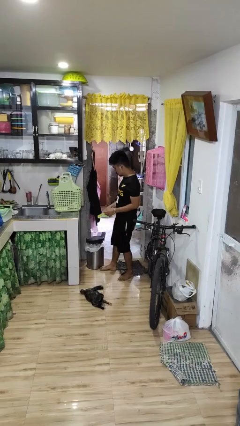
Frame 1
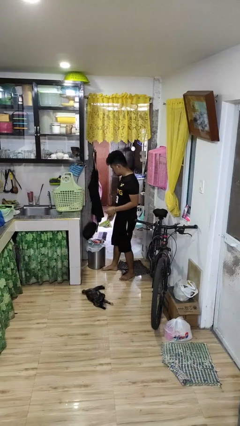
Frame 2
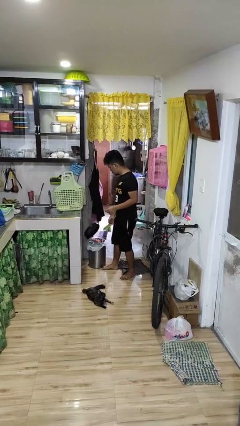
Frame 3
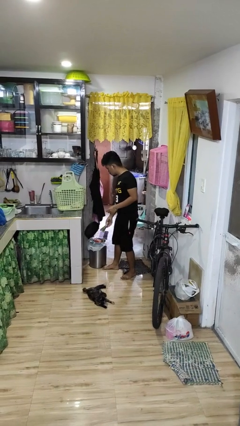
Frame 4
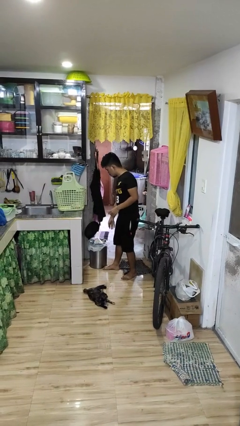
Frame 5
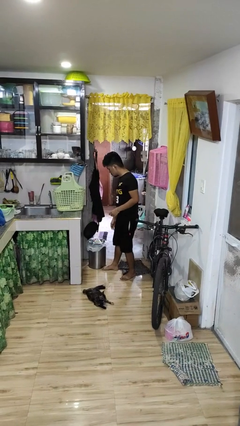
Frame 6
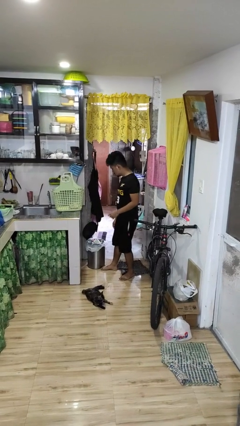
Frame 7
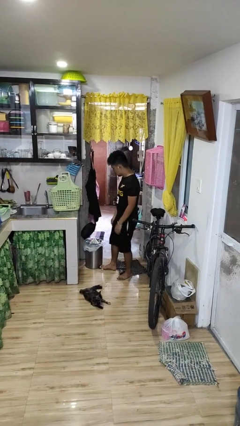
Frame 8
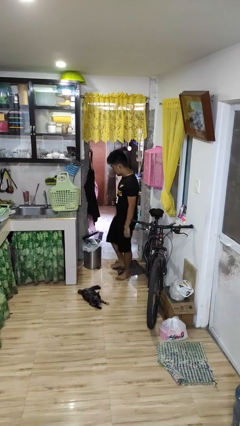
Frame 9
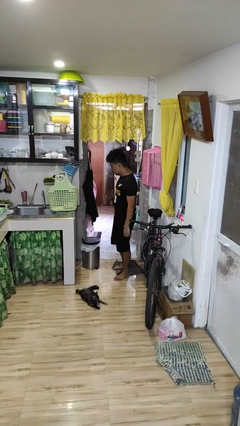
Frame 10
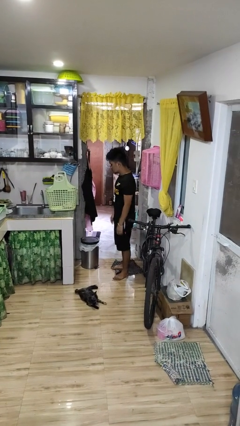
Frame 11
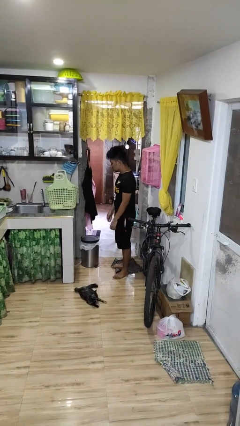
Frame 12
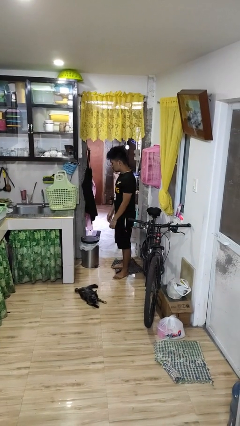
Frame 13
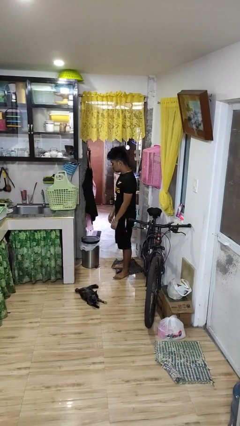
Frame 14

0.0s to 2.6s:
person discards trash

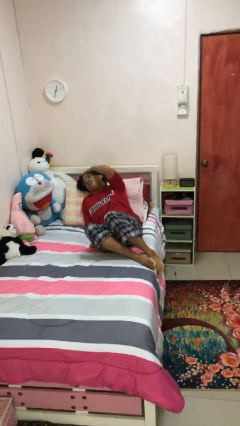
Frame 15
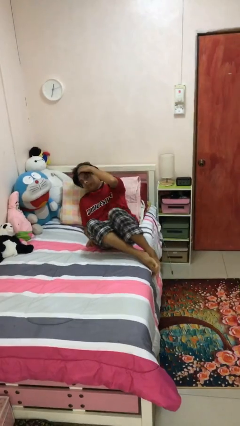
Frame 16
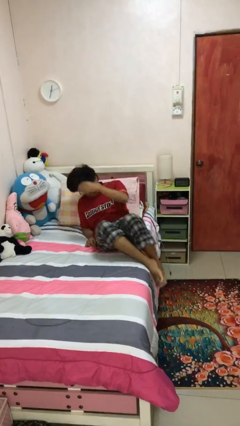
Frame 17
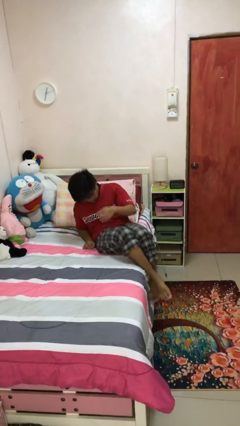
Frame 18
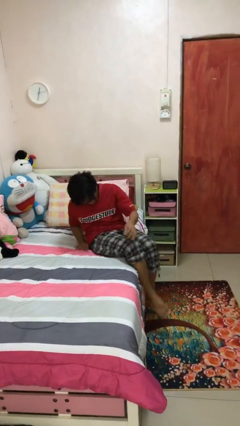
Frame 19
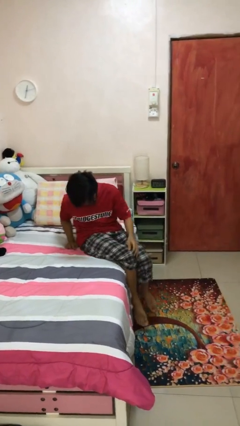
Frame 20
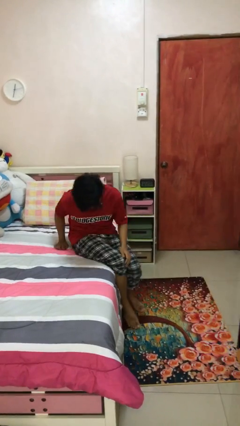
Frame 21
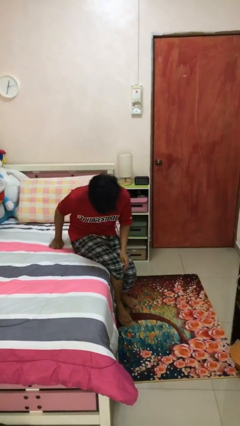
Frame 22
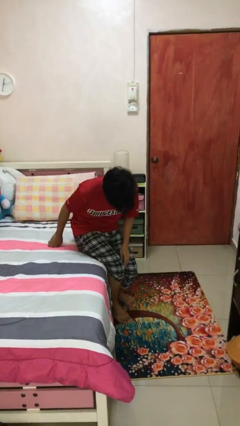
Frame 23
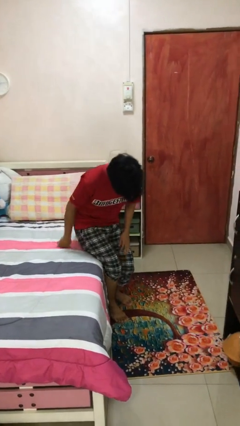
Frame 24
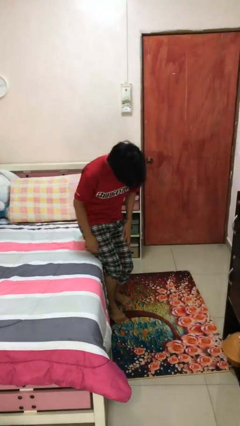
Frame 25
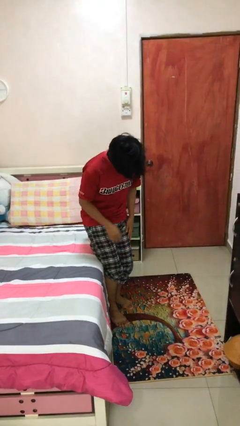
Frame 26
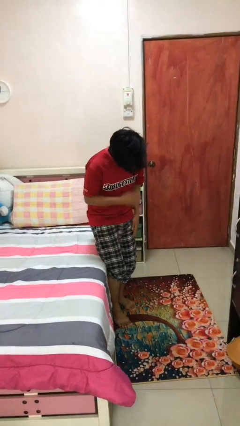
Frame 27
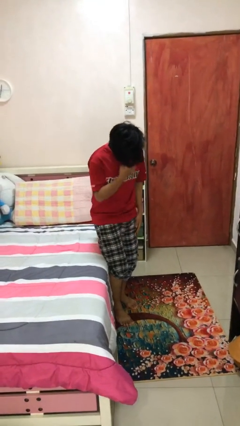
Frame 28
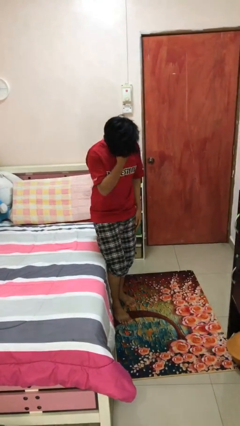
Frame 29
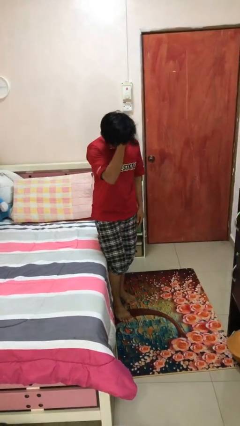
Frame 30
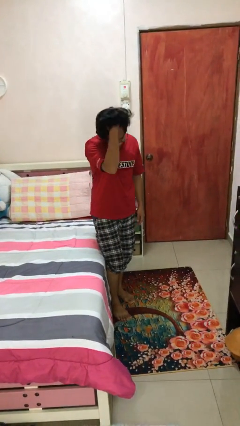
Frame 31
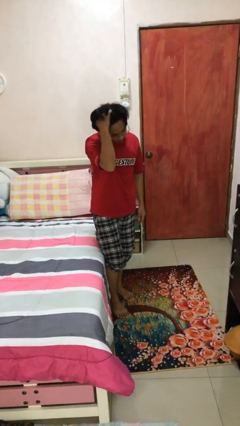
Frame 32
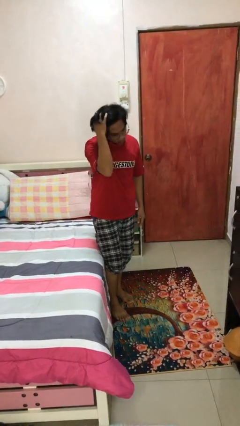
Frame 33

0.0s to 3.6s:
person stands up

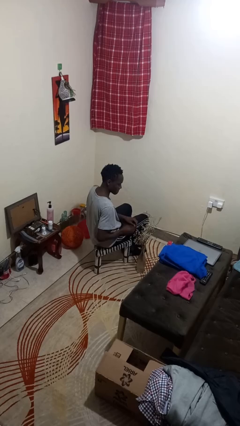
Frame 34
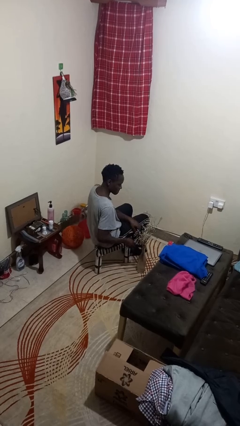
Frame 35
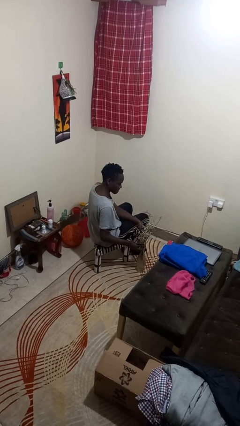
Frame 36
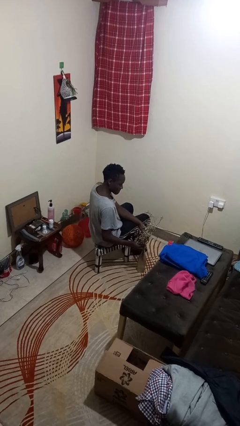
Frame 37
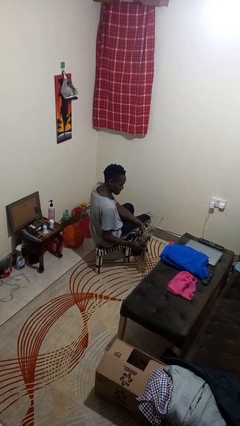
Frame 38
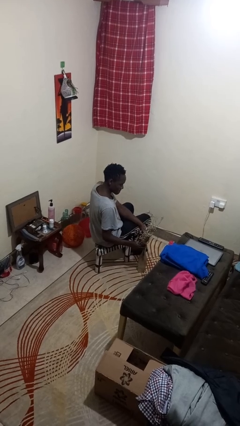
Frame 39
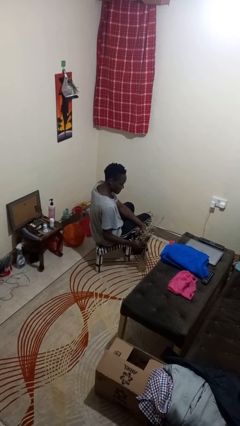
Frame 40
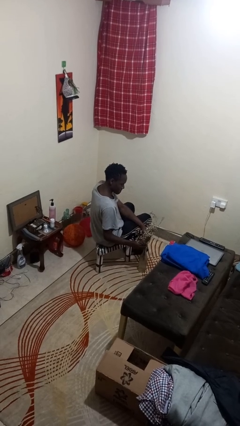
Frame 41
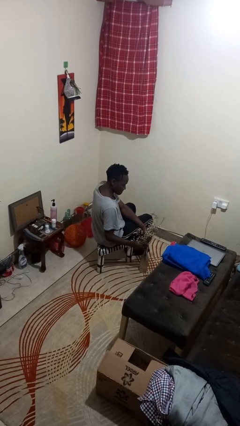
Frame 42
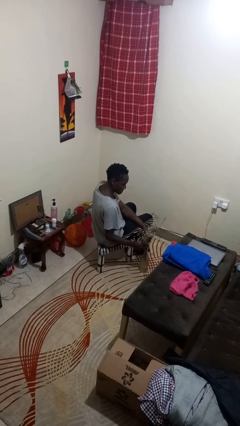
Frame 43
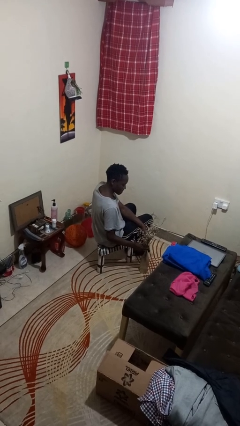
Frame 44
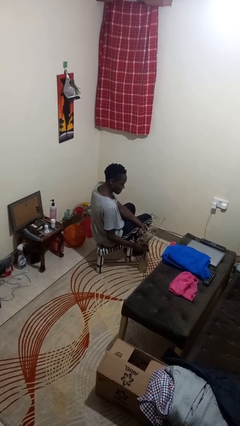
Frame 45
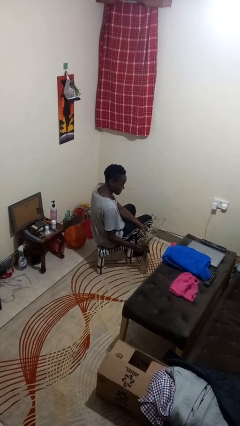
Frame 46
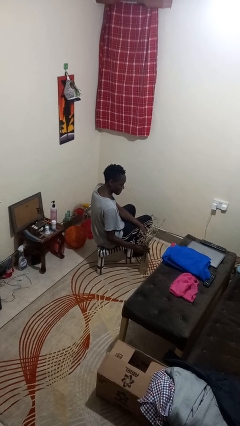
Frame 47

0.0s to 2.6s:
person arranges flowers in vase

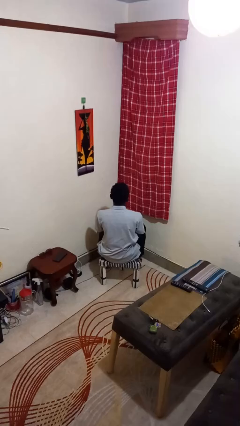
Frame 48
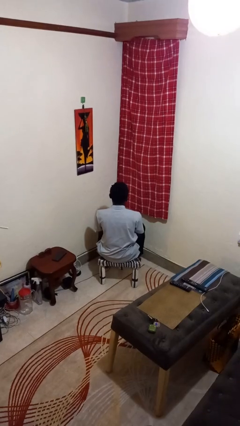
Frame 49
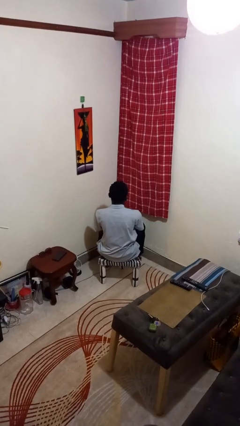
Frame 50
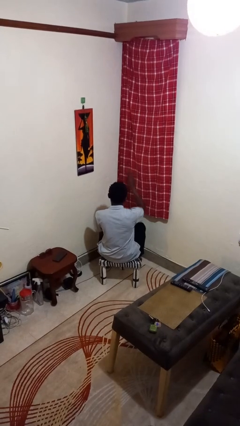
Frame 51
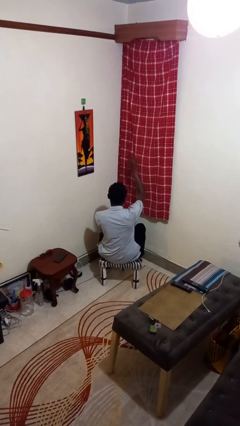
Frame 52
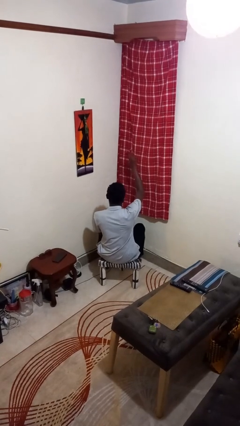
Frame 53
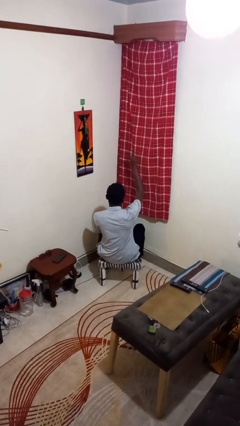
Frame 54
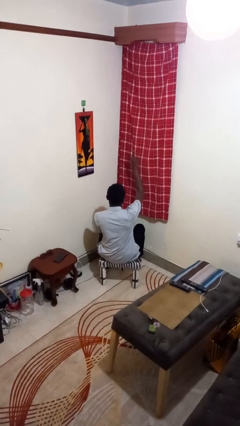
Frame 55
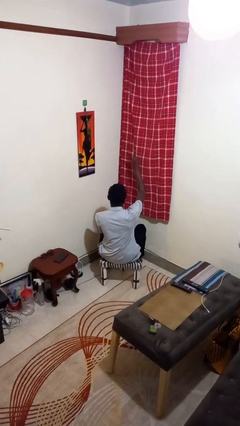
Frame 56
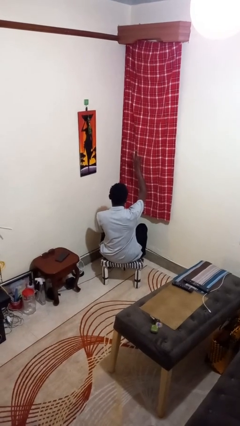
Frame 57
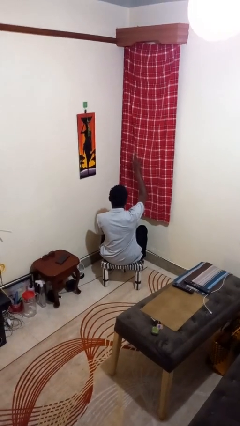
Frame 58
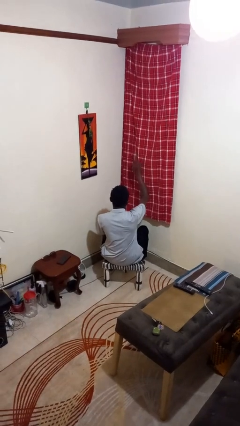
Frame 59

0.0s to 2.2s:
person gestures peace

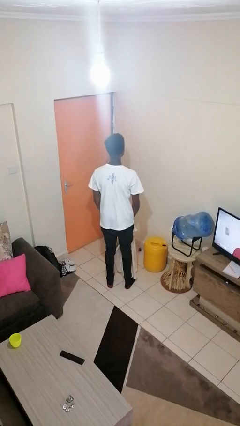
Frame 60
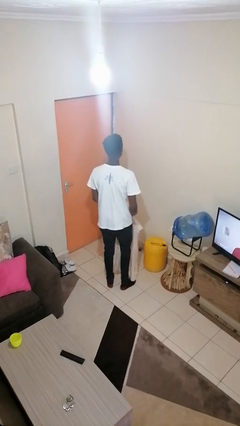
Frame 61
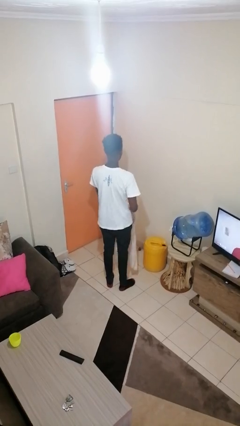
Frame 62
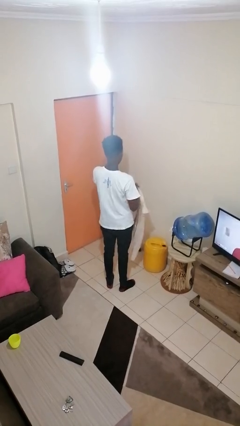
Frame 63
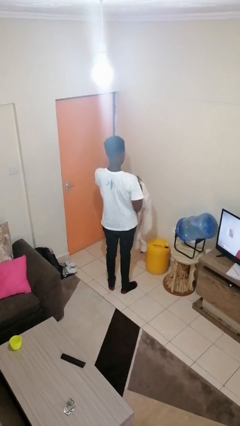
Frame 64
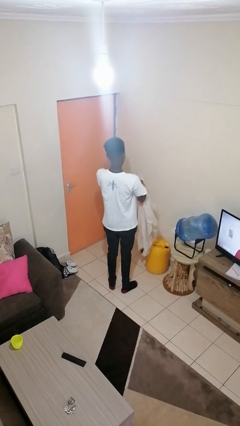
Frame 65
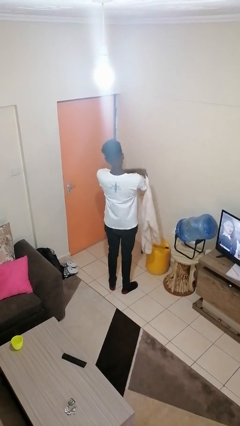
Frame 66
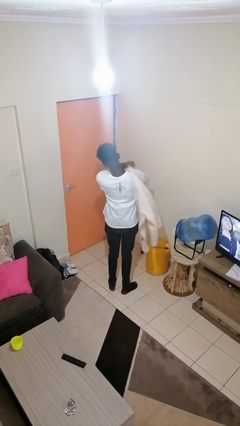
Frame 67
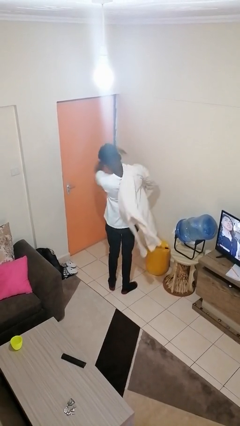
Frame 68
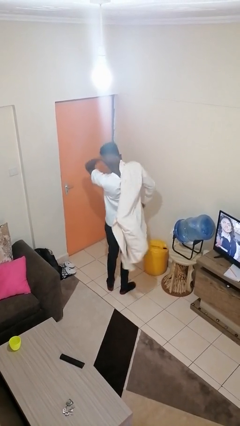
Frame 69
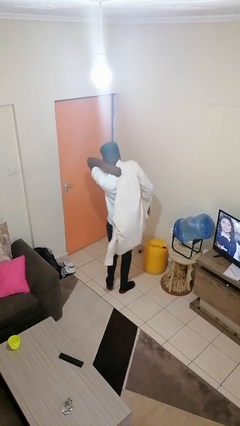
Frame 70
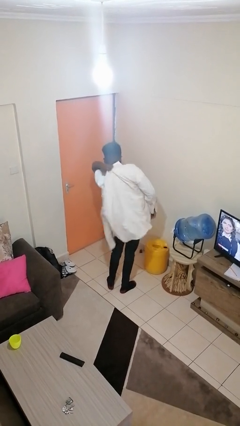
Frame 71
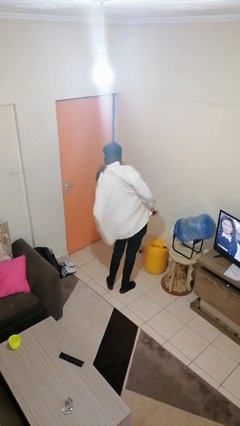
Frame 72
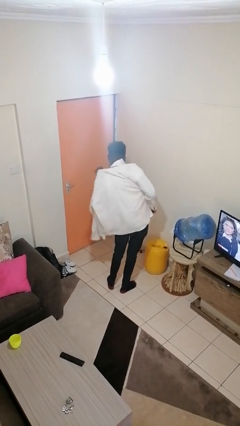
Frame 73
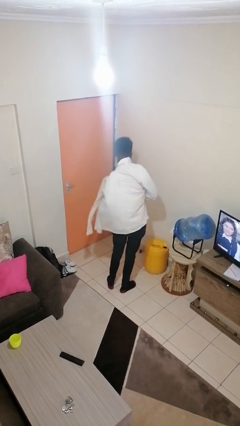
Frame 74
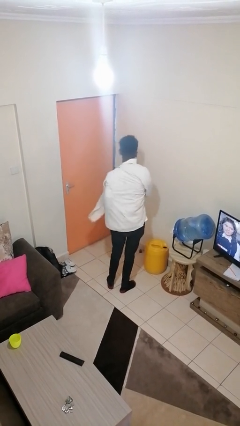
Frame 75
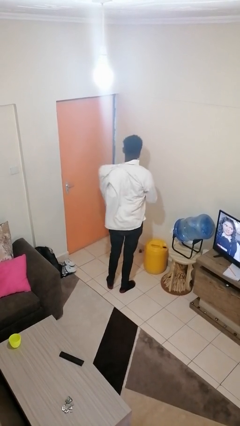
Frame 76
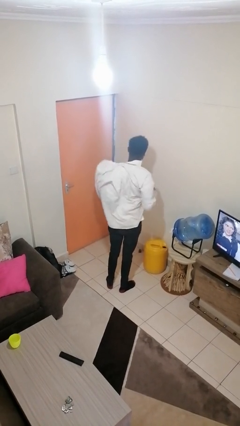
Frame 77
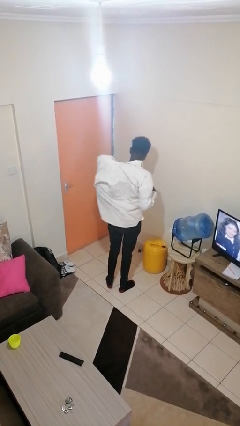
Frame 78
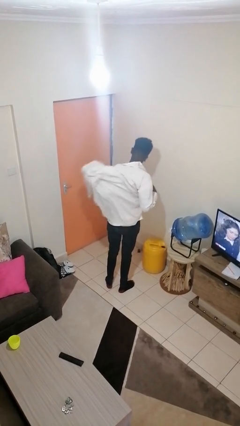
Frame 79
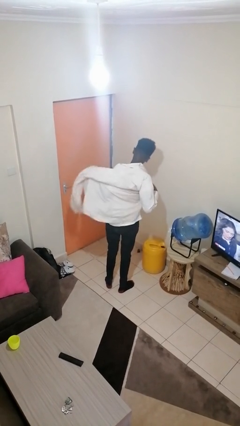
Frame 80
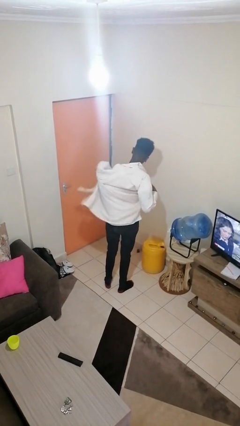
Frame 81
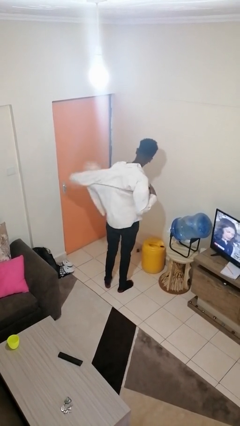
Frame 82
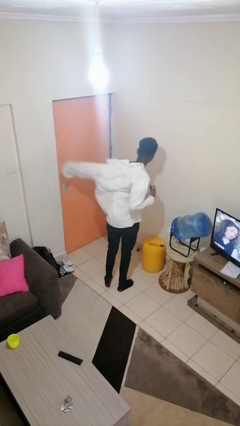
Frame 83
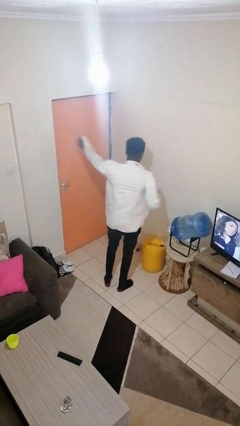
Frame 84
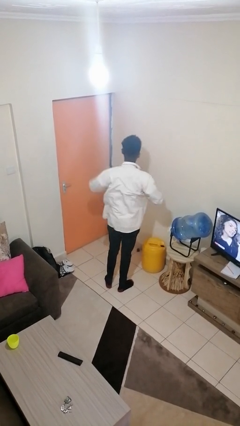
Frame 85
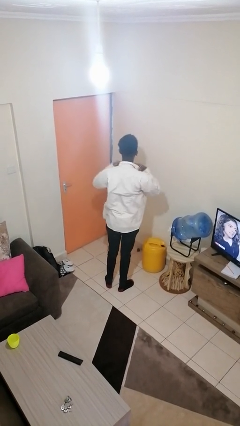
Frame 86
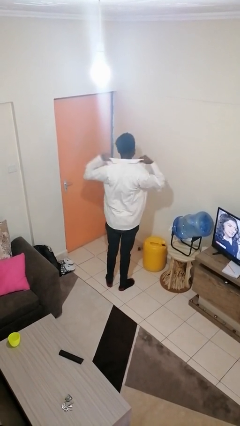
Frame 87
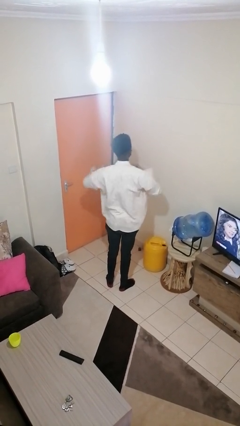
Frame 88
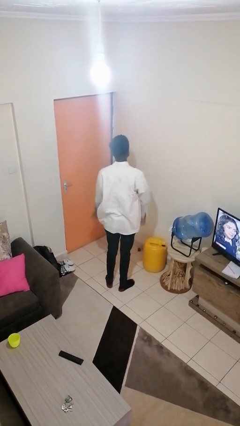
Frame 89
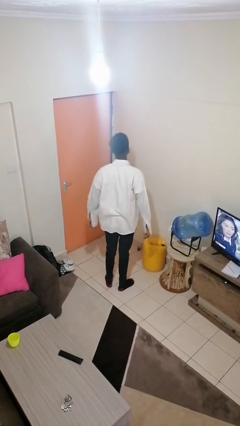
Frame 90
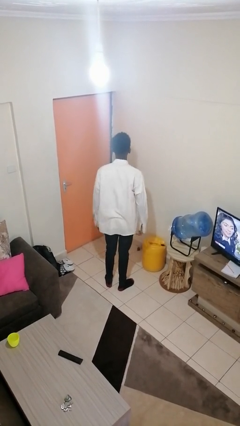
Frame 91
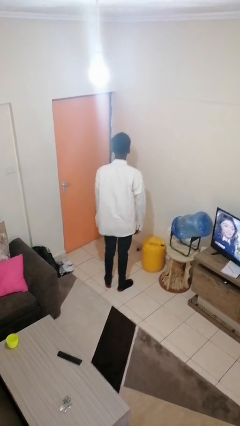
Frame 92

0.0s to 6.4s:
person puts on shirt
